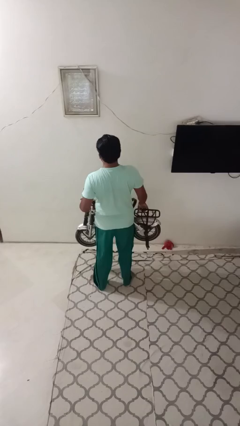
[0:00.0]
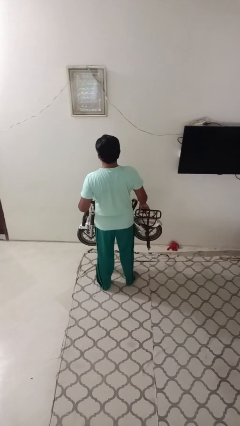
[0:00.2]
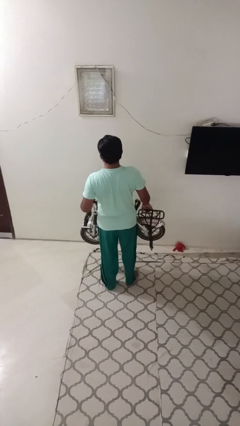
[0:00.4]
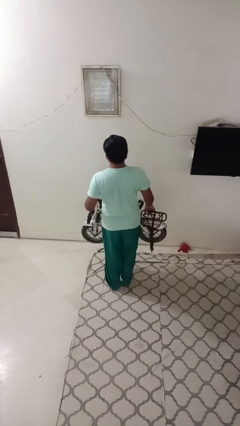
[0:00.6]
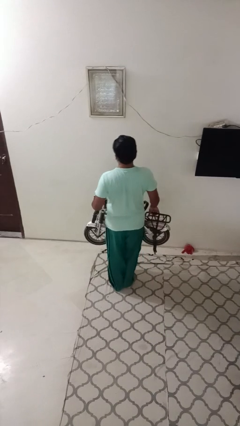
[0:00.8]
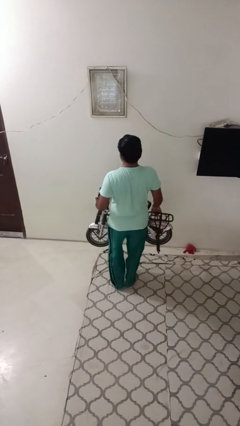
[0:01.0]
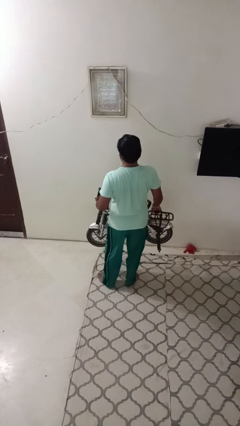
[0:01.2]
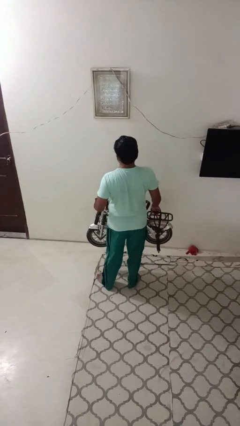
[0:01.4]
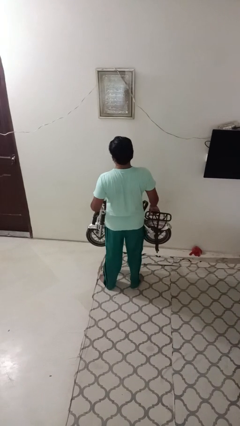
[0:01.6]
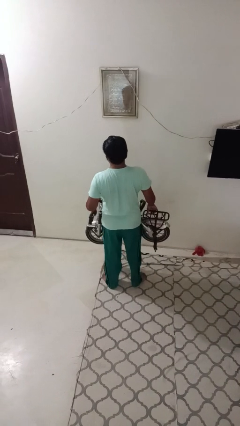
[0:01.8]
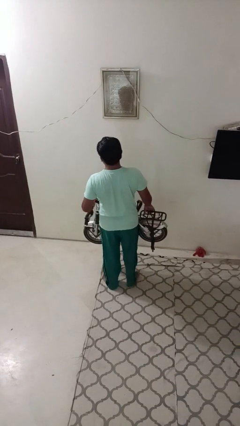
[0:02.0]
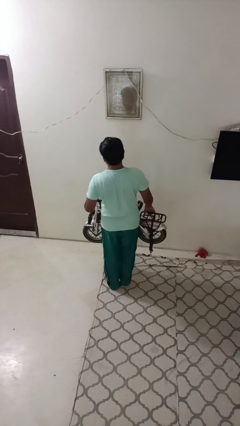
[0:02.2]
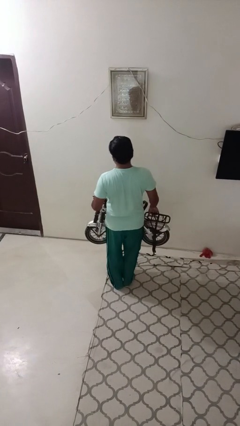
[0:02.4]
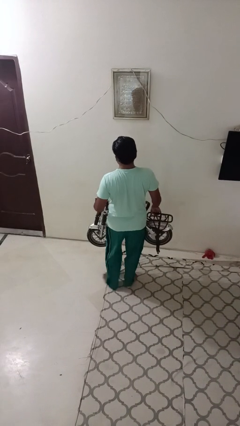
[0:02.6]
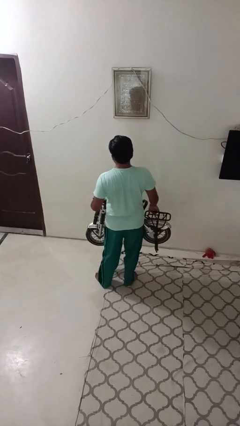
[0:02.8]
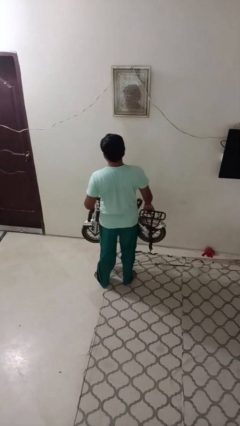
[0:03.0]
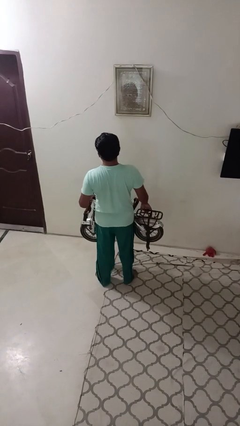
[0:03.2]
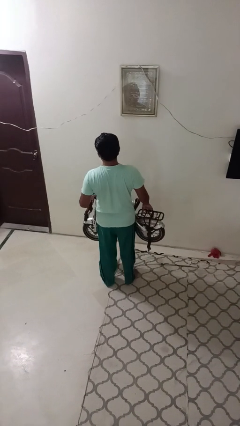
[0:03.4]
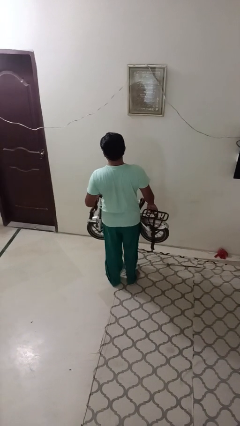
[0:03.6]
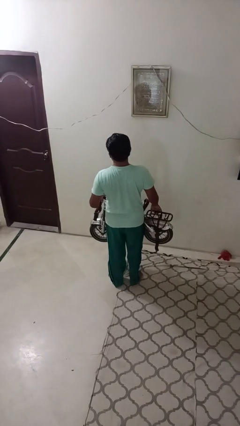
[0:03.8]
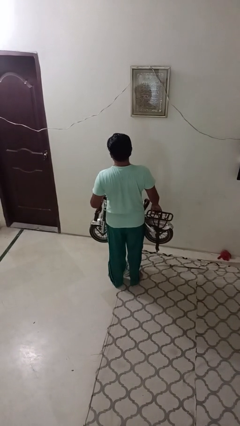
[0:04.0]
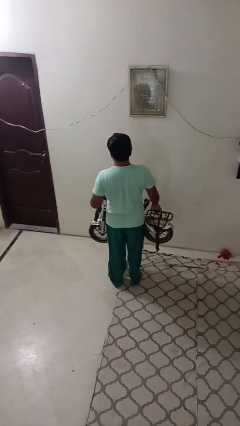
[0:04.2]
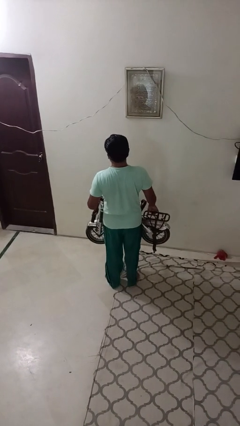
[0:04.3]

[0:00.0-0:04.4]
person carries bicycle

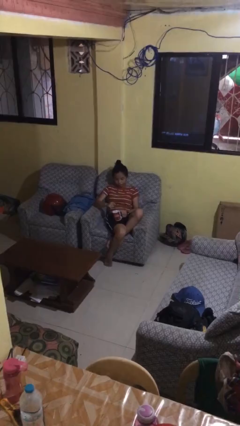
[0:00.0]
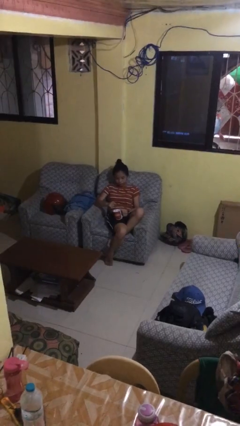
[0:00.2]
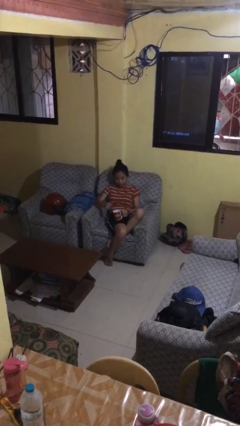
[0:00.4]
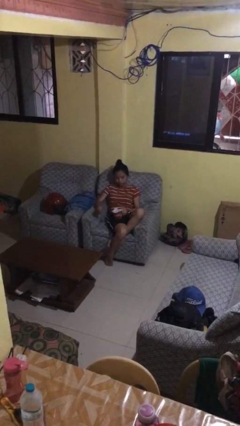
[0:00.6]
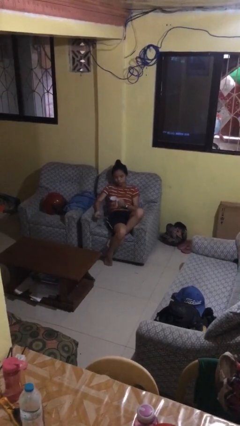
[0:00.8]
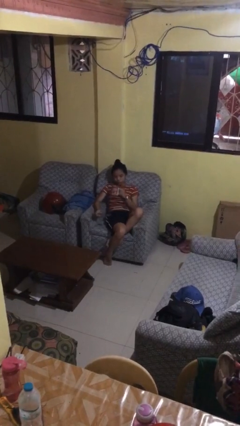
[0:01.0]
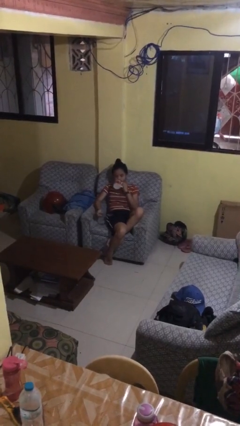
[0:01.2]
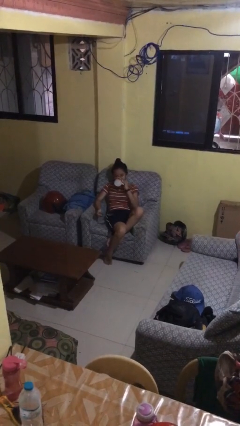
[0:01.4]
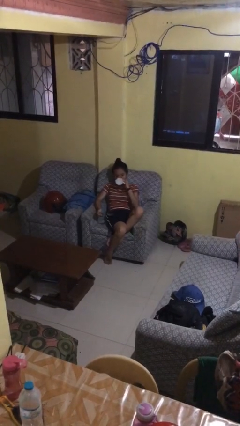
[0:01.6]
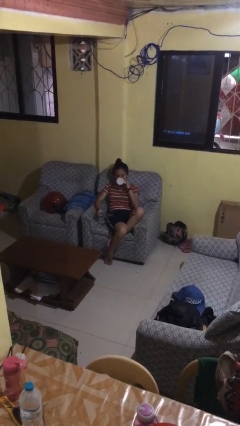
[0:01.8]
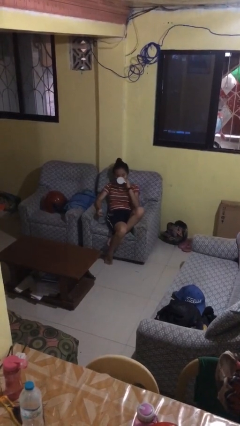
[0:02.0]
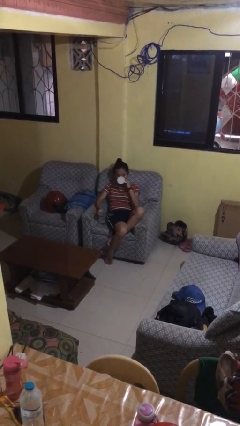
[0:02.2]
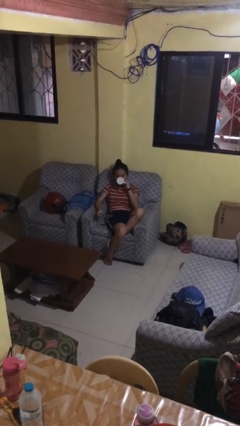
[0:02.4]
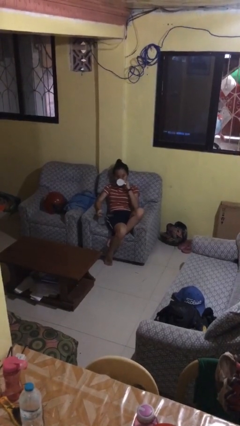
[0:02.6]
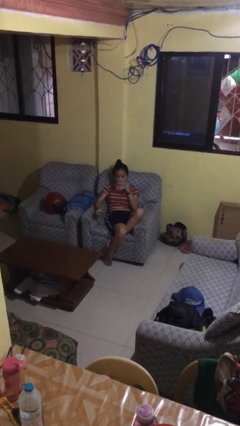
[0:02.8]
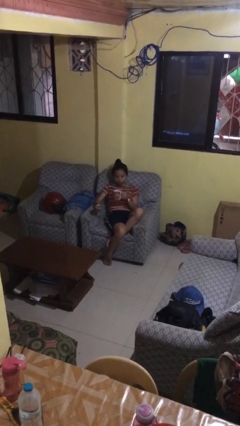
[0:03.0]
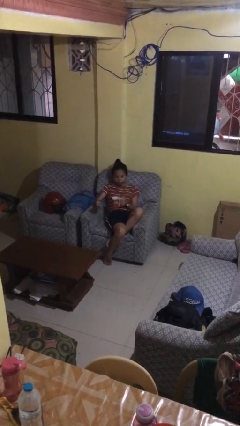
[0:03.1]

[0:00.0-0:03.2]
person drinks from mug

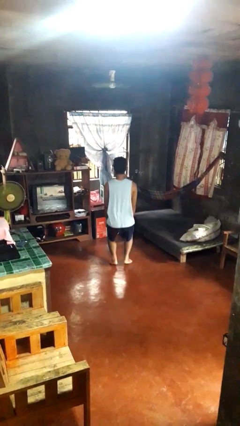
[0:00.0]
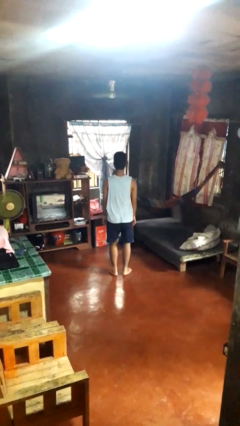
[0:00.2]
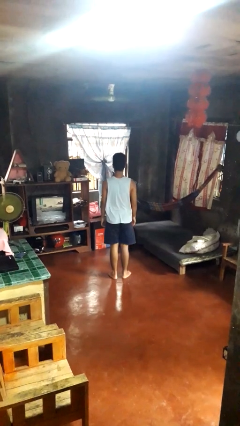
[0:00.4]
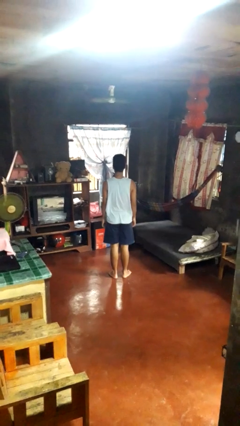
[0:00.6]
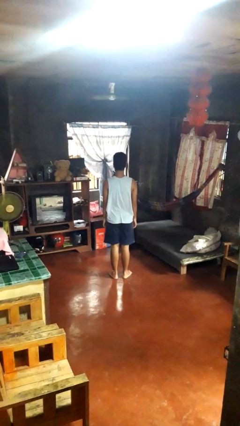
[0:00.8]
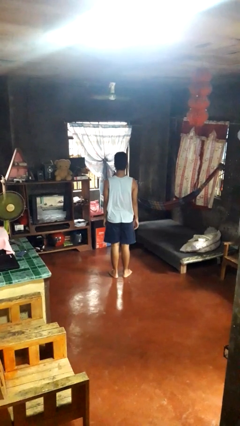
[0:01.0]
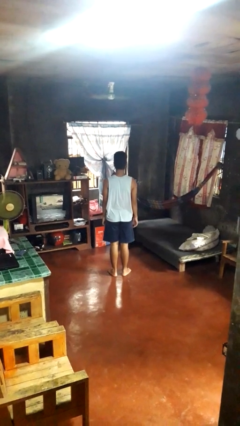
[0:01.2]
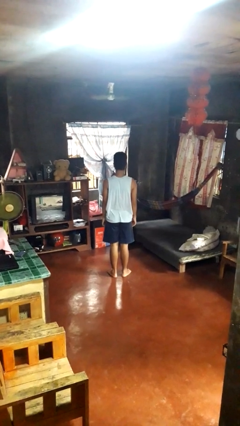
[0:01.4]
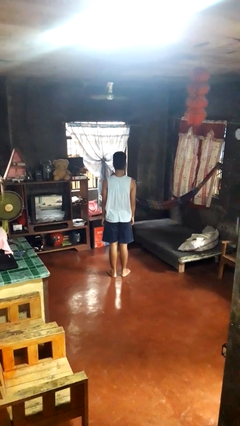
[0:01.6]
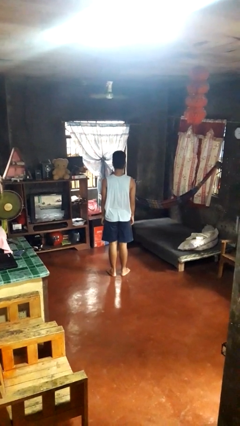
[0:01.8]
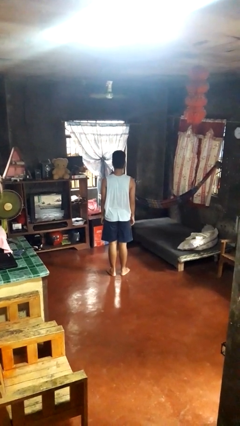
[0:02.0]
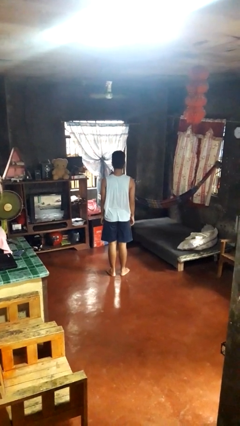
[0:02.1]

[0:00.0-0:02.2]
person stands up

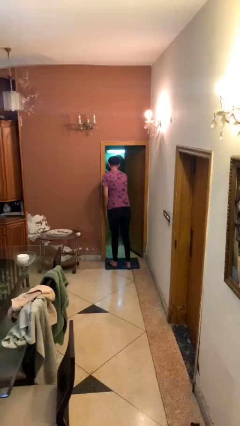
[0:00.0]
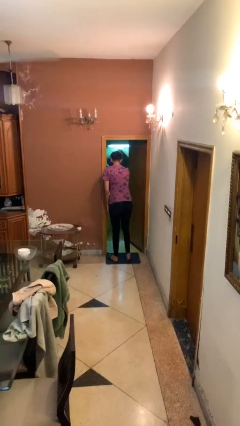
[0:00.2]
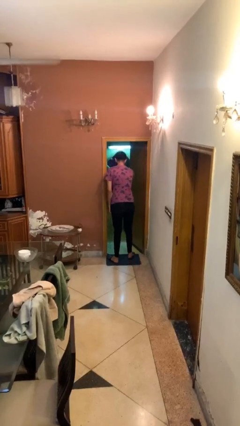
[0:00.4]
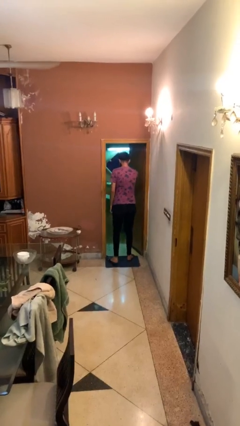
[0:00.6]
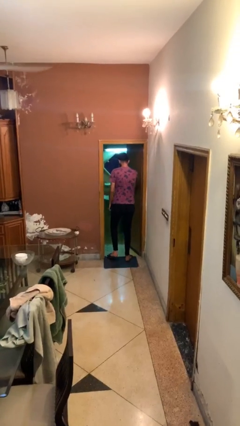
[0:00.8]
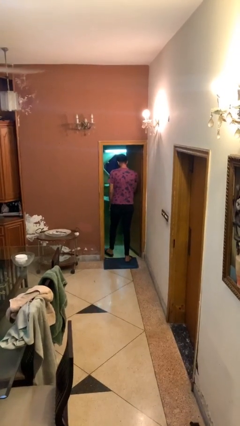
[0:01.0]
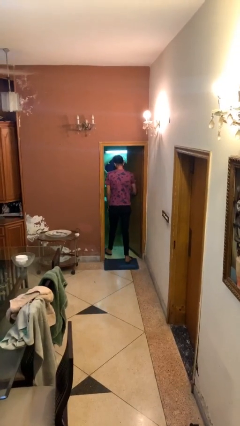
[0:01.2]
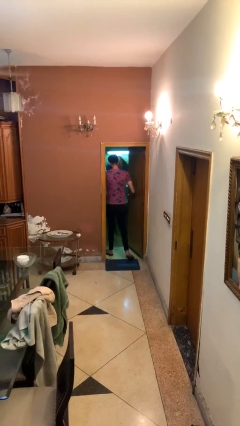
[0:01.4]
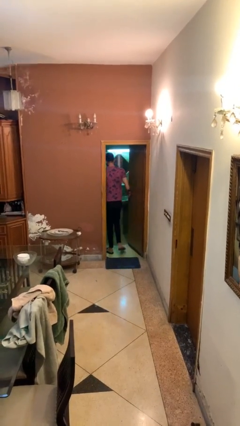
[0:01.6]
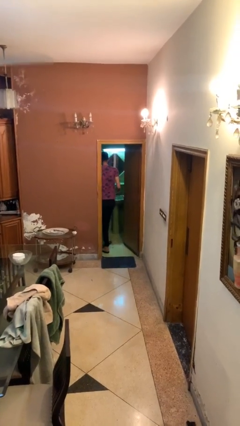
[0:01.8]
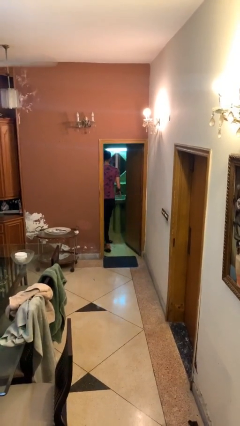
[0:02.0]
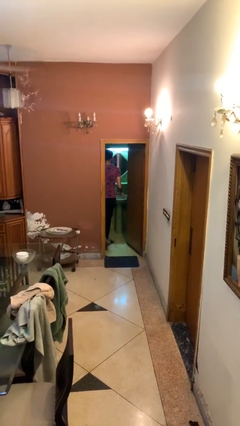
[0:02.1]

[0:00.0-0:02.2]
person exits scene through structure

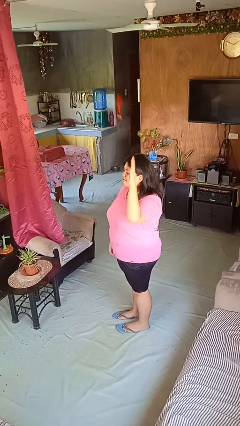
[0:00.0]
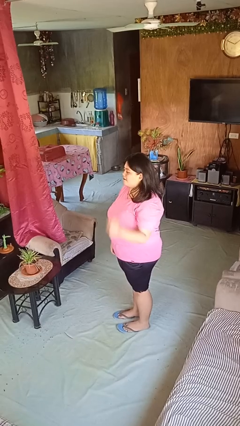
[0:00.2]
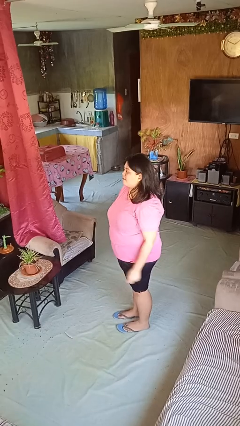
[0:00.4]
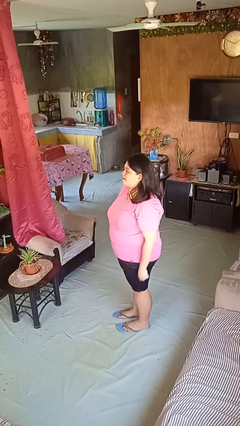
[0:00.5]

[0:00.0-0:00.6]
person gestures lower hand

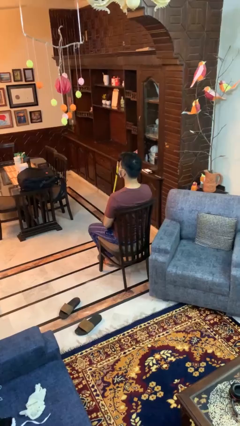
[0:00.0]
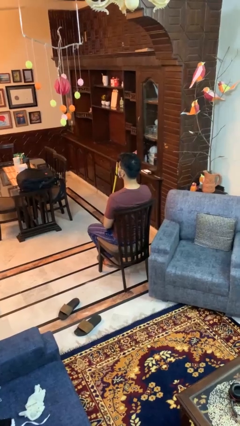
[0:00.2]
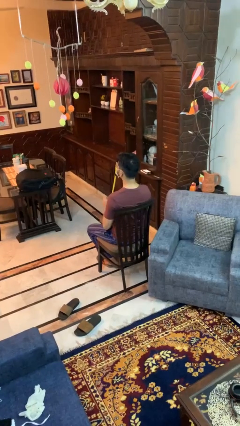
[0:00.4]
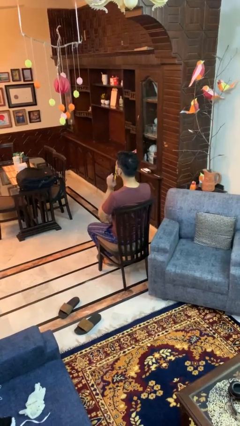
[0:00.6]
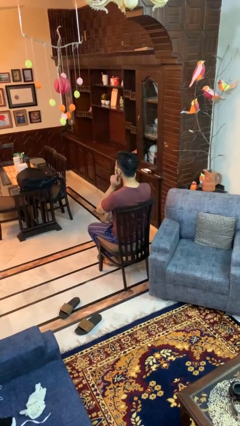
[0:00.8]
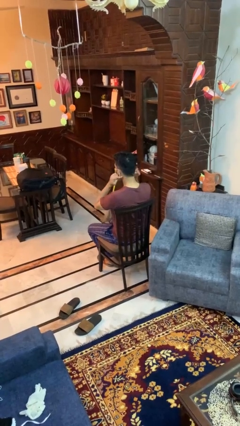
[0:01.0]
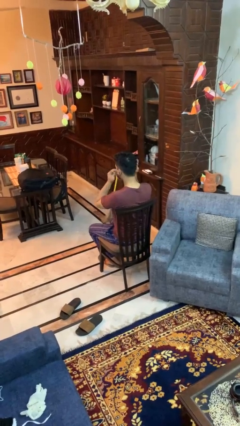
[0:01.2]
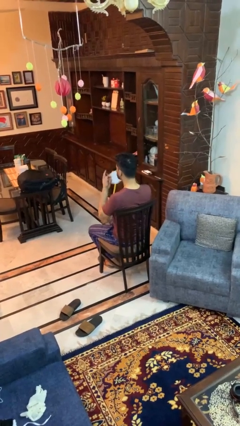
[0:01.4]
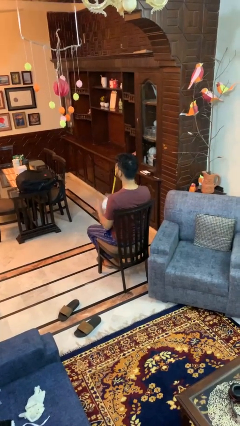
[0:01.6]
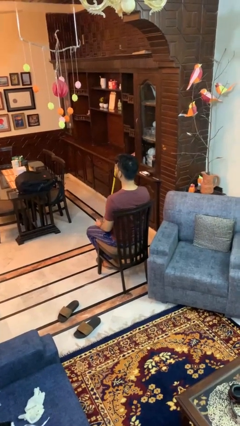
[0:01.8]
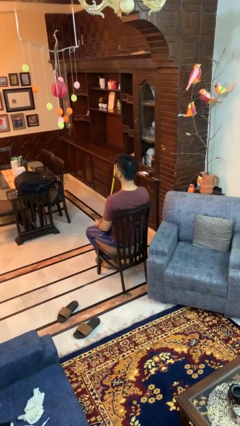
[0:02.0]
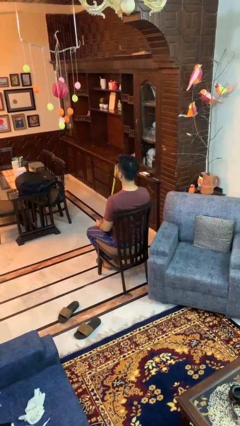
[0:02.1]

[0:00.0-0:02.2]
person takes off facemask

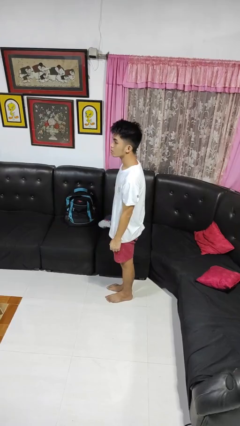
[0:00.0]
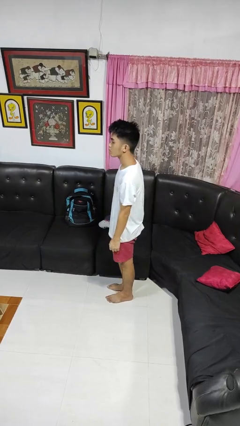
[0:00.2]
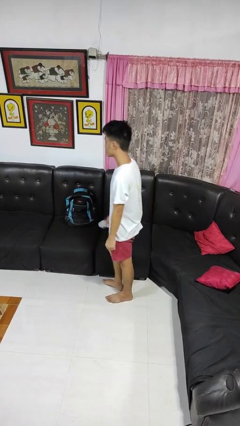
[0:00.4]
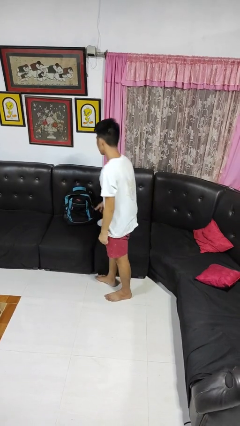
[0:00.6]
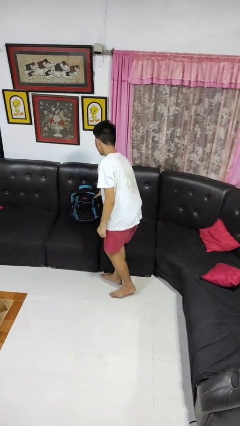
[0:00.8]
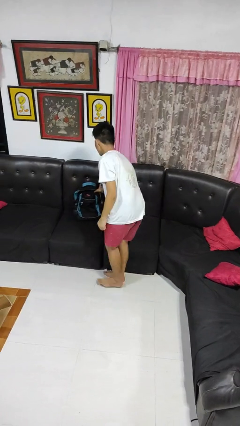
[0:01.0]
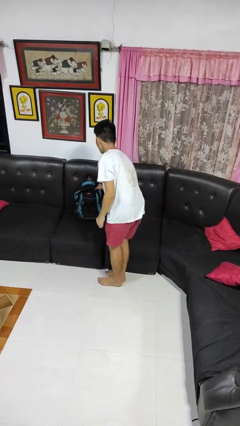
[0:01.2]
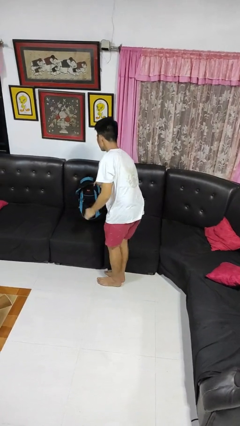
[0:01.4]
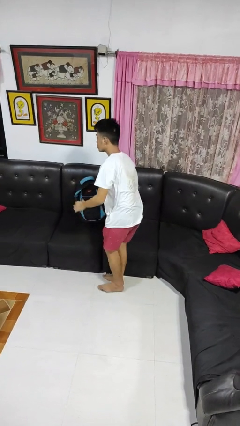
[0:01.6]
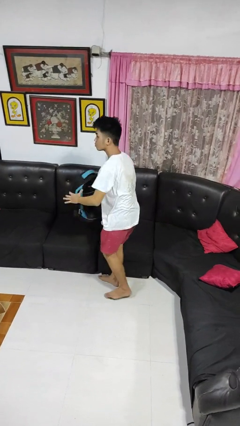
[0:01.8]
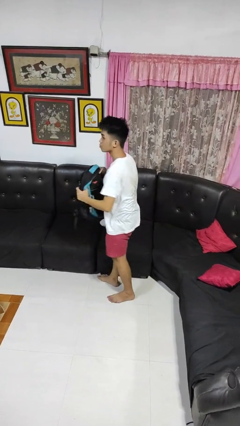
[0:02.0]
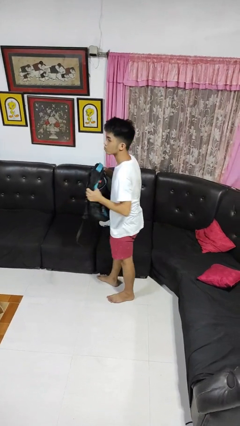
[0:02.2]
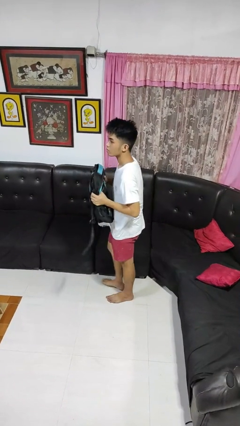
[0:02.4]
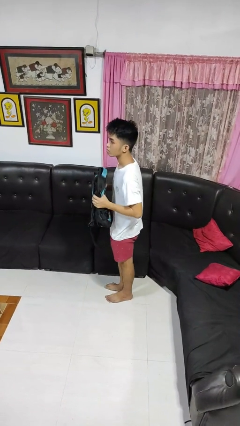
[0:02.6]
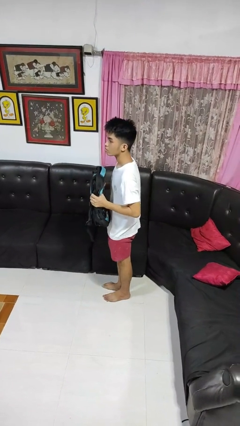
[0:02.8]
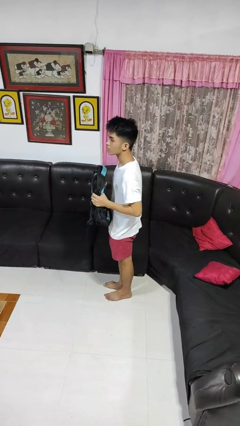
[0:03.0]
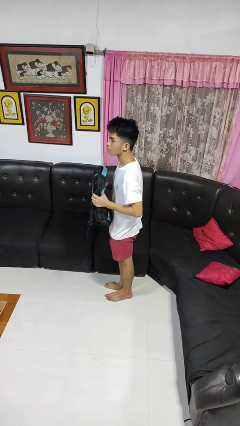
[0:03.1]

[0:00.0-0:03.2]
person picks up object from couch
